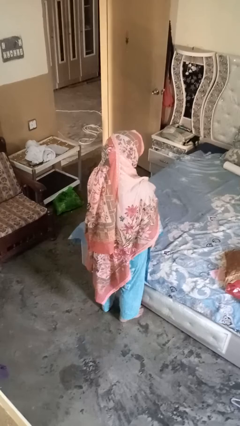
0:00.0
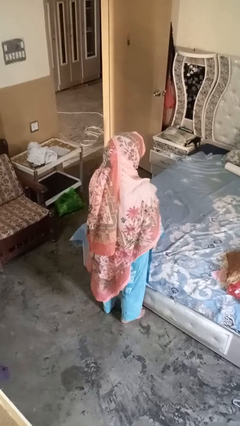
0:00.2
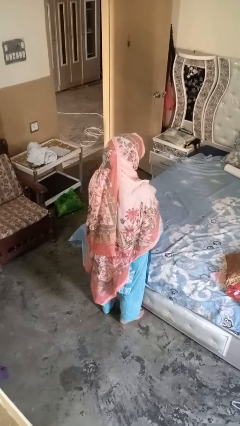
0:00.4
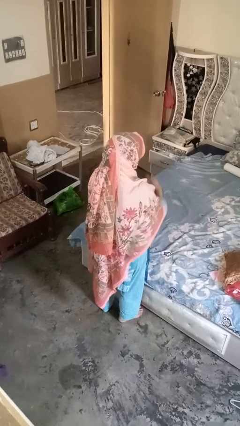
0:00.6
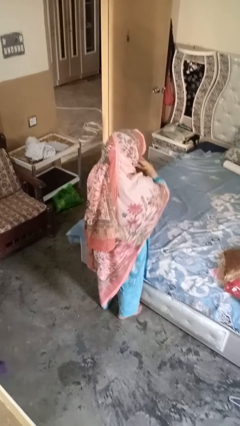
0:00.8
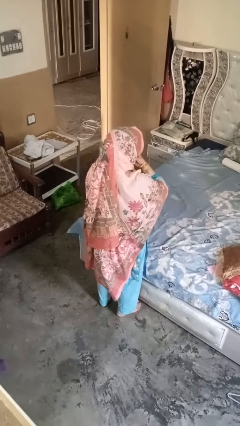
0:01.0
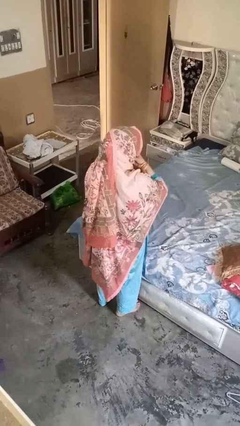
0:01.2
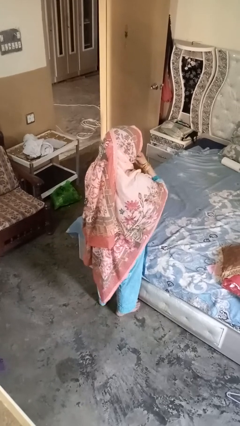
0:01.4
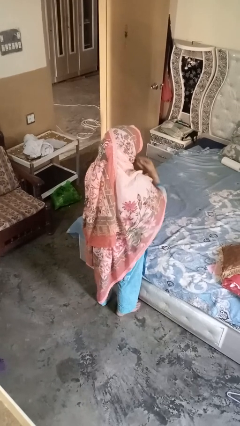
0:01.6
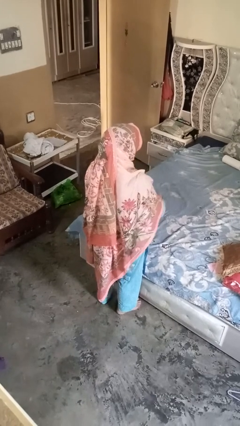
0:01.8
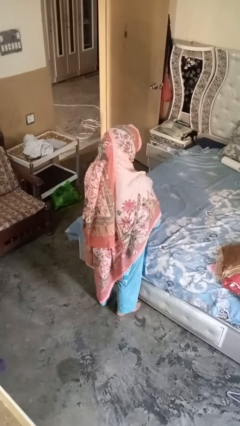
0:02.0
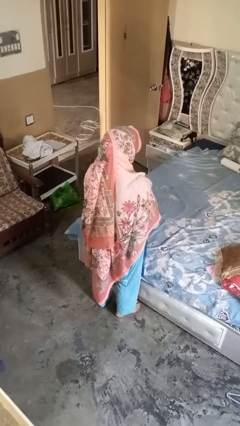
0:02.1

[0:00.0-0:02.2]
person strokes chin

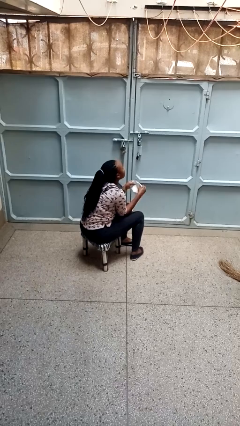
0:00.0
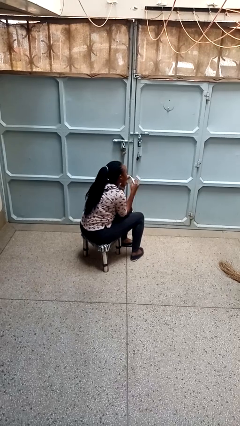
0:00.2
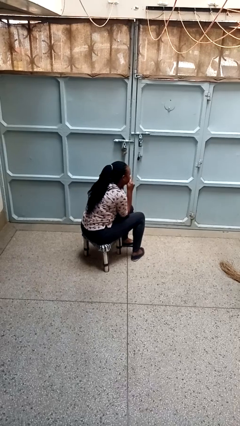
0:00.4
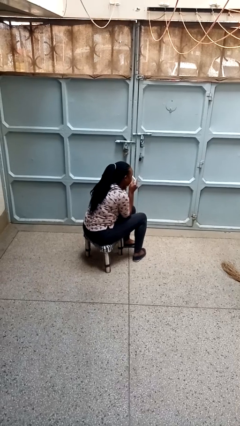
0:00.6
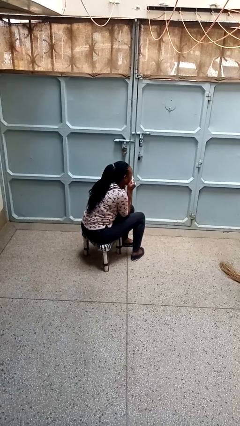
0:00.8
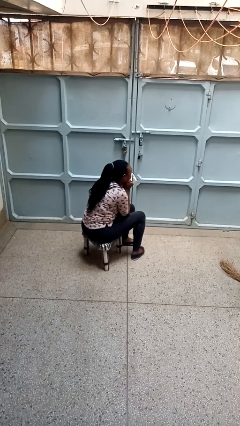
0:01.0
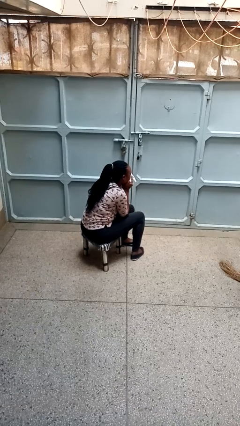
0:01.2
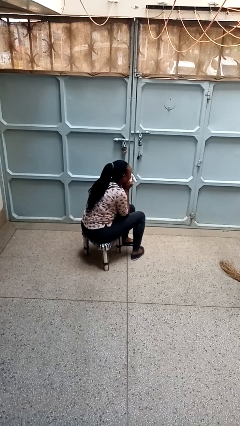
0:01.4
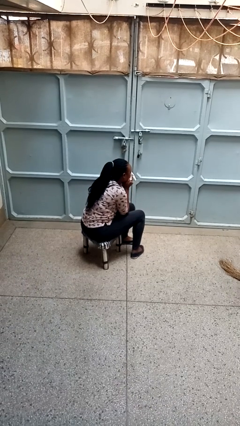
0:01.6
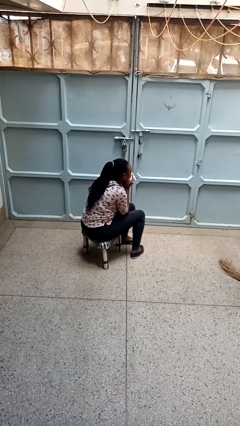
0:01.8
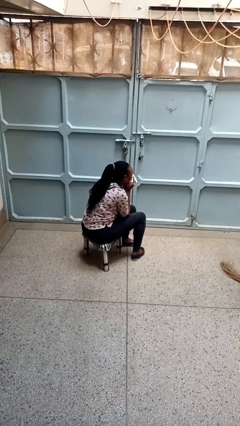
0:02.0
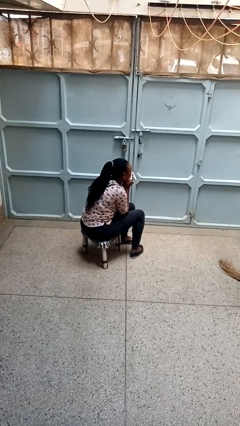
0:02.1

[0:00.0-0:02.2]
person blows nose

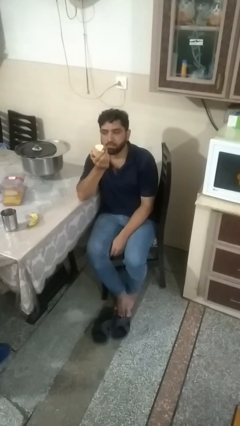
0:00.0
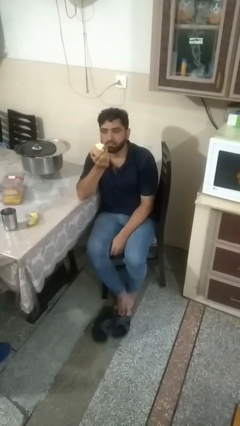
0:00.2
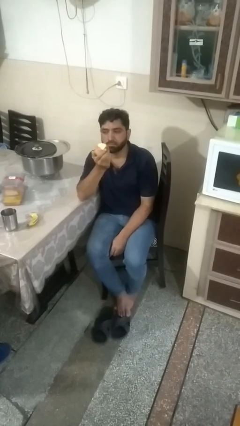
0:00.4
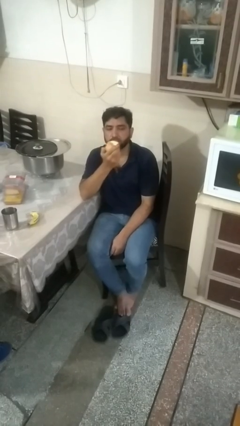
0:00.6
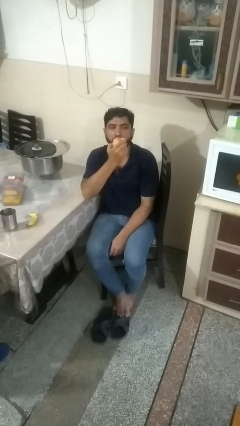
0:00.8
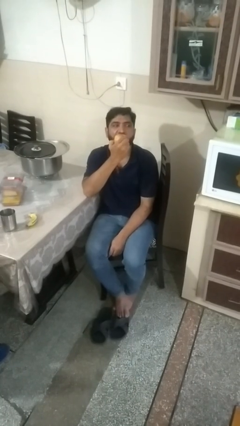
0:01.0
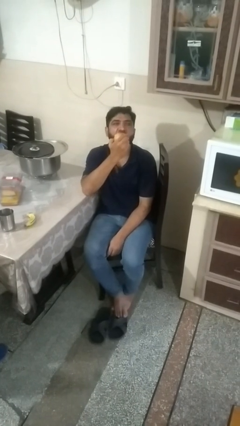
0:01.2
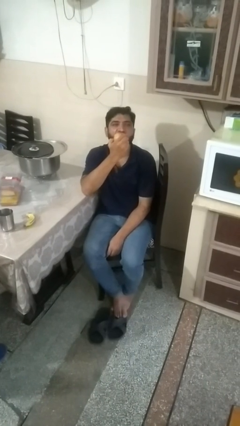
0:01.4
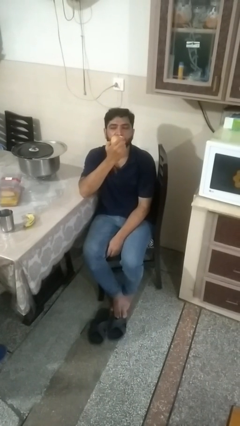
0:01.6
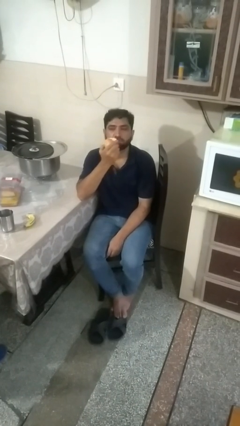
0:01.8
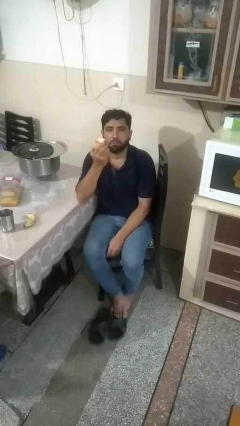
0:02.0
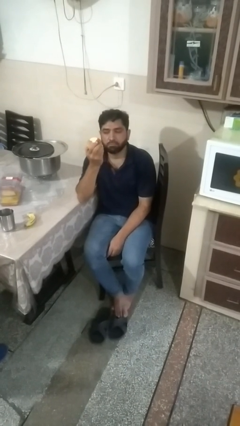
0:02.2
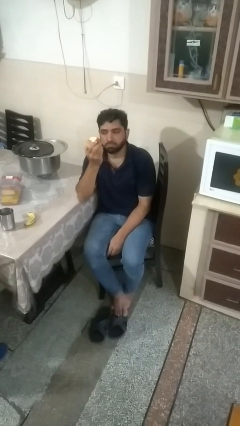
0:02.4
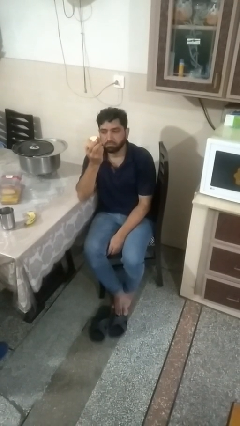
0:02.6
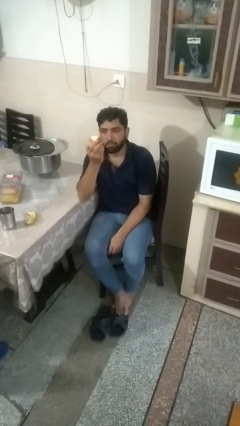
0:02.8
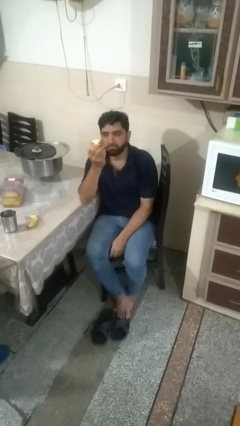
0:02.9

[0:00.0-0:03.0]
person eats apple

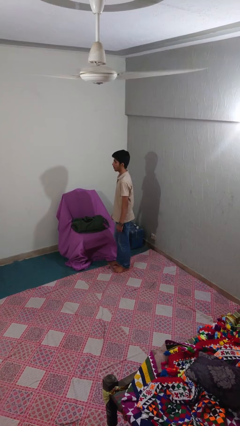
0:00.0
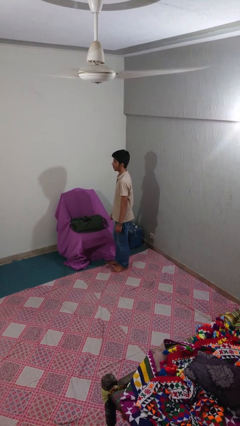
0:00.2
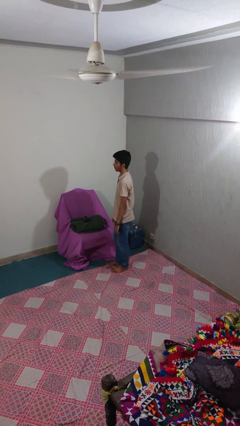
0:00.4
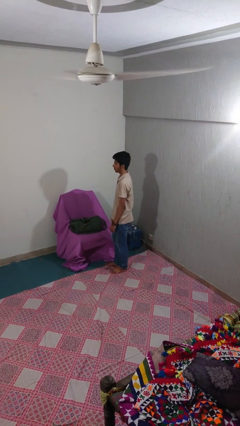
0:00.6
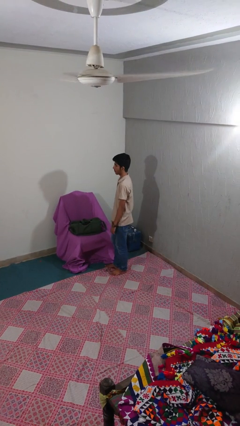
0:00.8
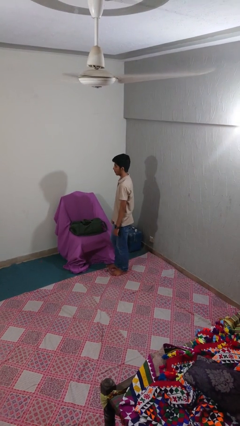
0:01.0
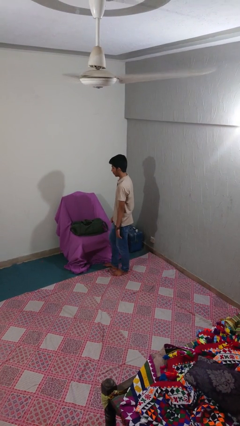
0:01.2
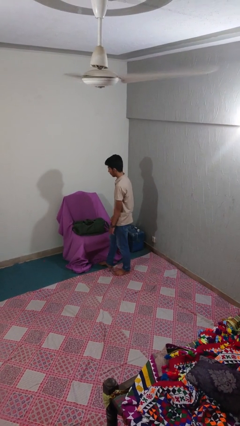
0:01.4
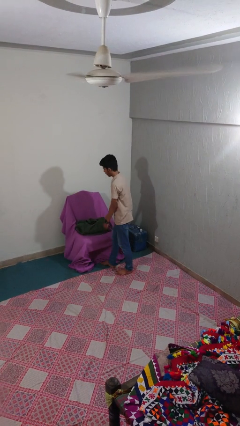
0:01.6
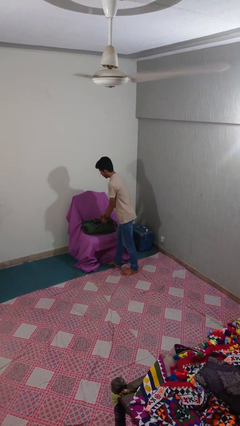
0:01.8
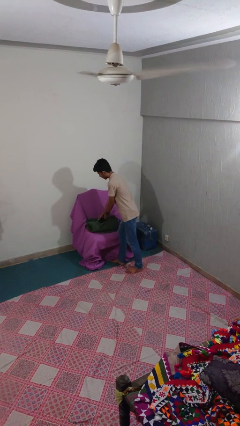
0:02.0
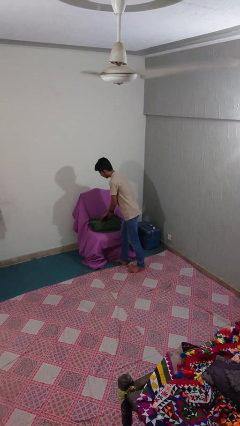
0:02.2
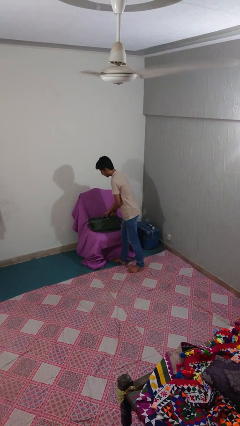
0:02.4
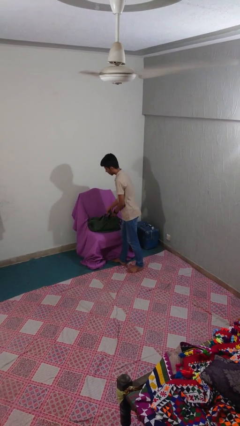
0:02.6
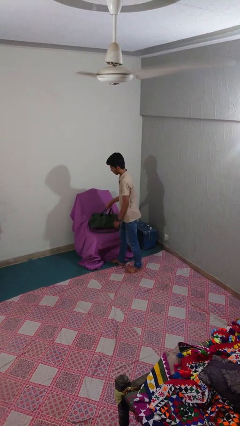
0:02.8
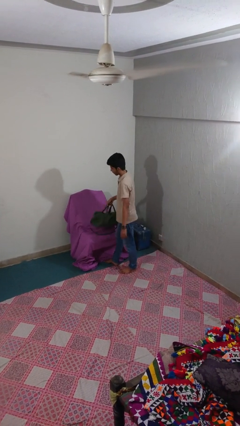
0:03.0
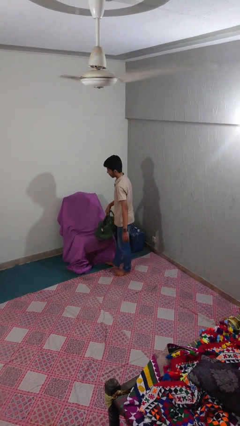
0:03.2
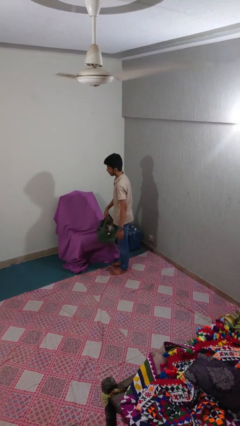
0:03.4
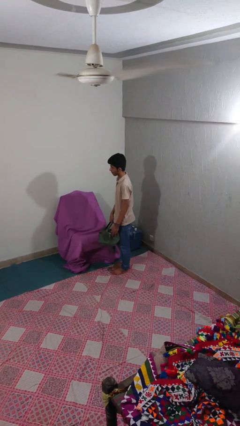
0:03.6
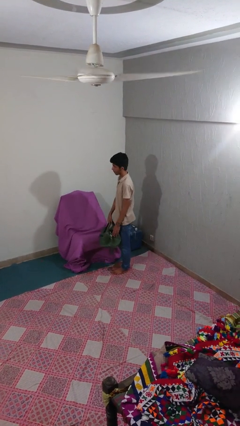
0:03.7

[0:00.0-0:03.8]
person picks up object from couch

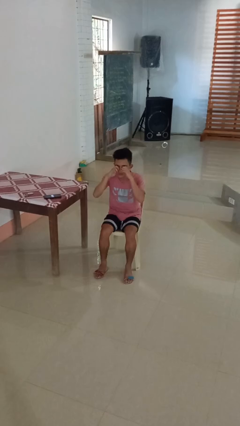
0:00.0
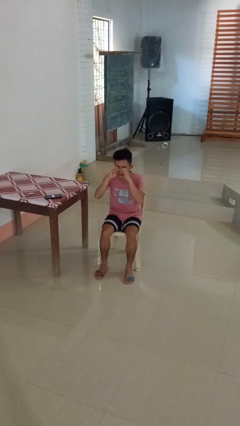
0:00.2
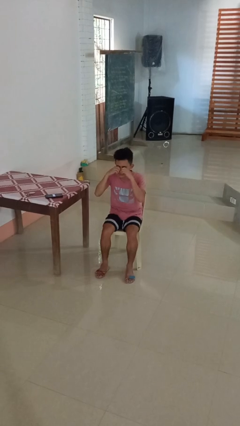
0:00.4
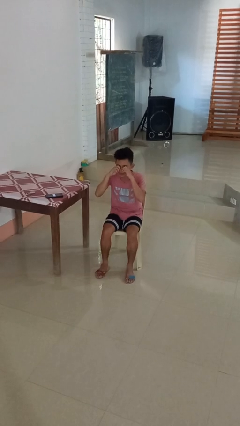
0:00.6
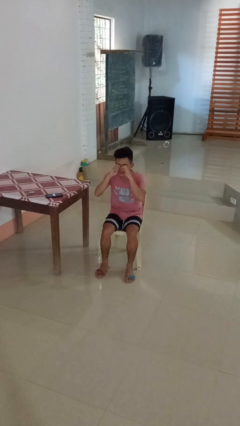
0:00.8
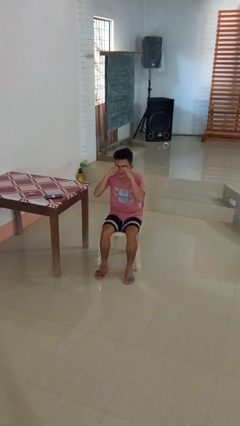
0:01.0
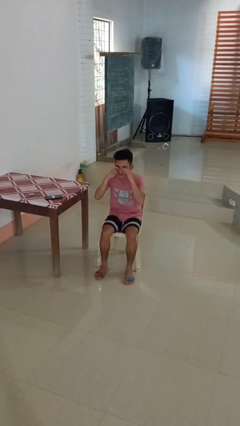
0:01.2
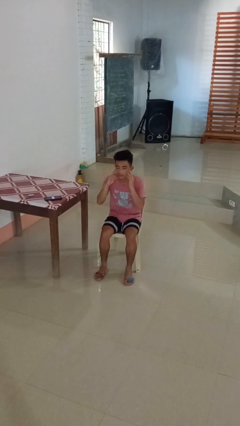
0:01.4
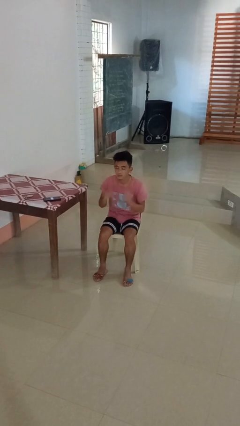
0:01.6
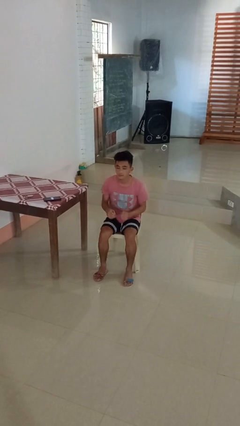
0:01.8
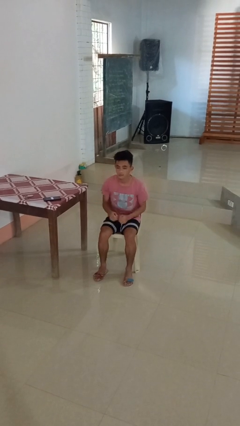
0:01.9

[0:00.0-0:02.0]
person rubs eyes

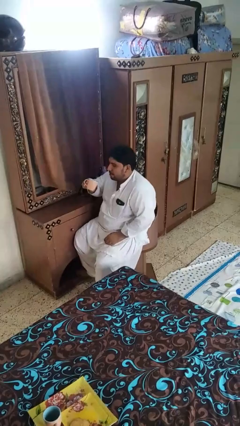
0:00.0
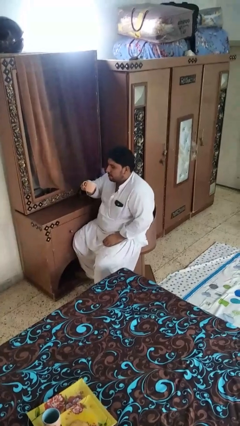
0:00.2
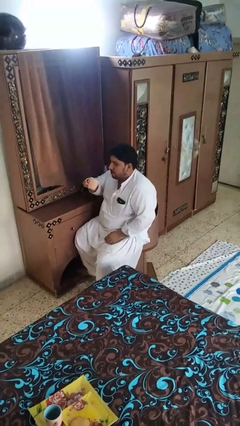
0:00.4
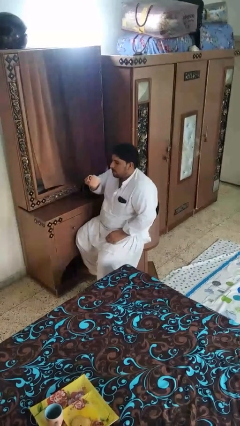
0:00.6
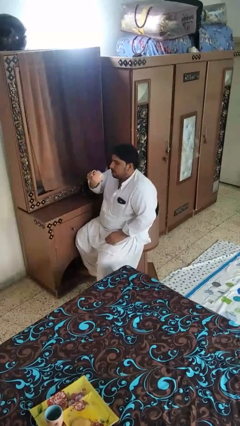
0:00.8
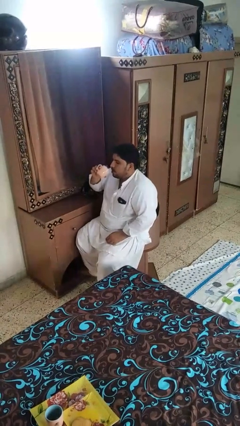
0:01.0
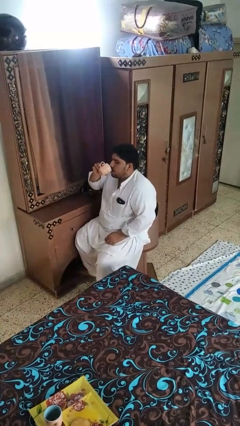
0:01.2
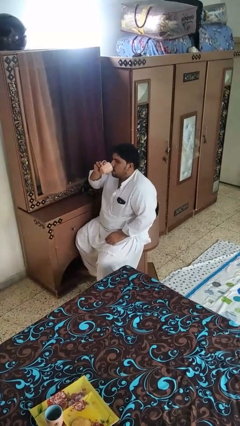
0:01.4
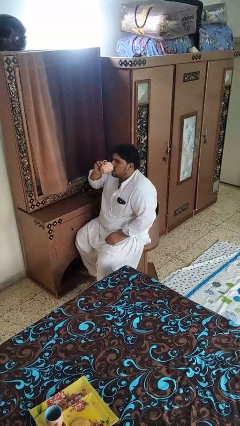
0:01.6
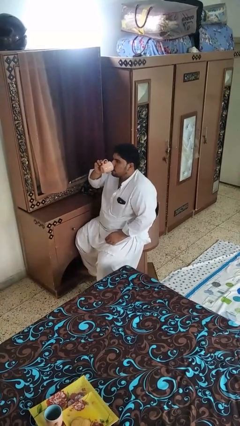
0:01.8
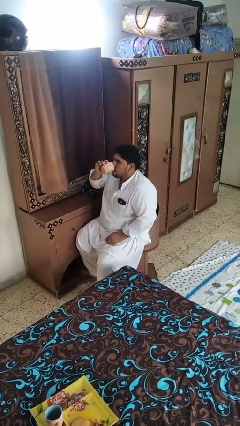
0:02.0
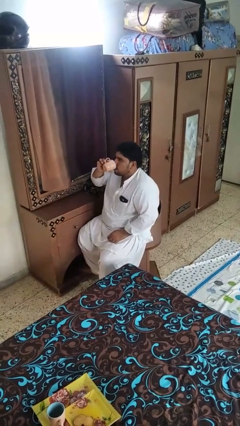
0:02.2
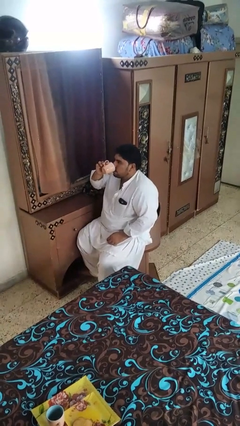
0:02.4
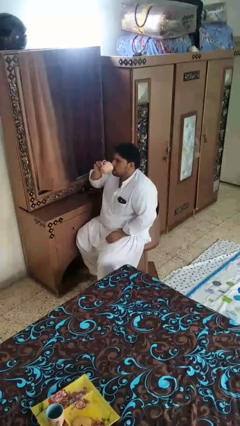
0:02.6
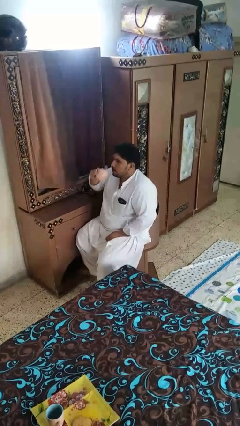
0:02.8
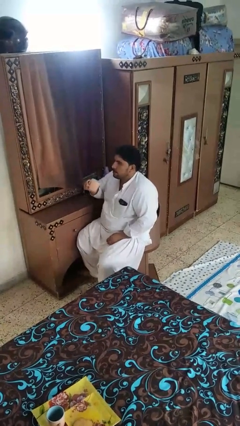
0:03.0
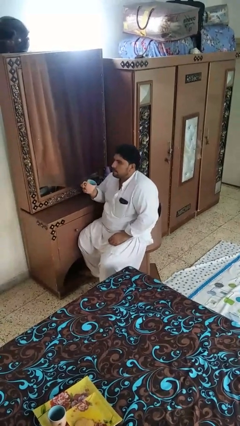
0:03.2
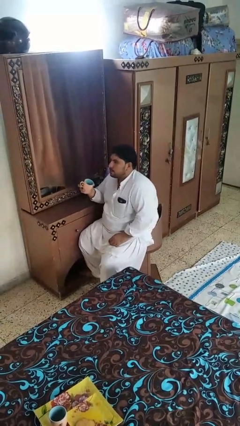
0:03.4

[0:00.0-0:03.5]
person drinks from mug

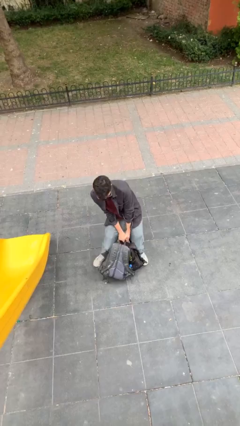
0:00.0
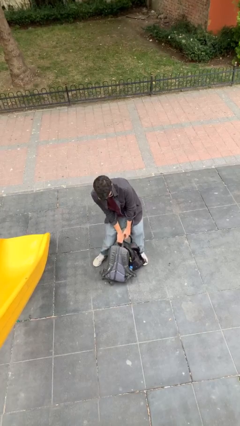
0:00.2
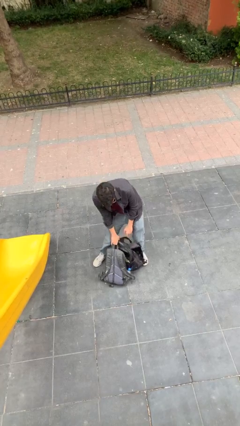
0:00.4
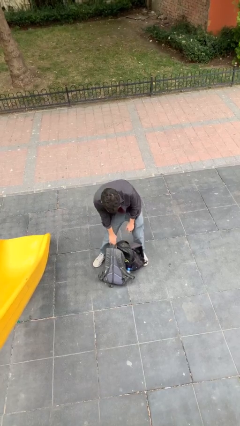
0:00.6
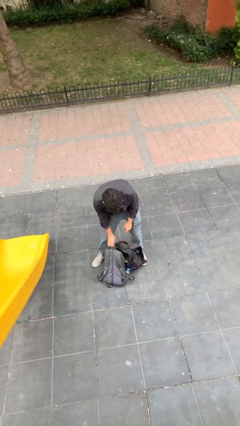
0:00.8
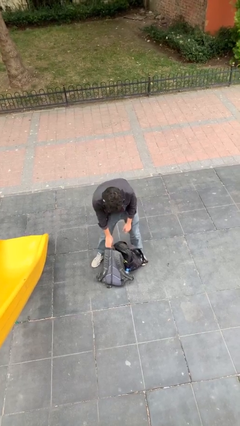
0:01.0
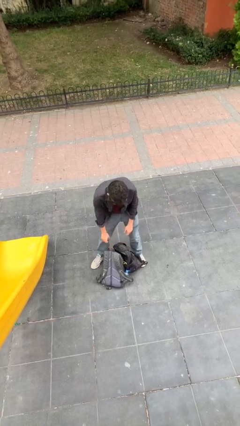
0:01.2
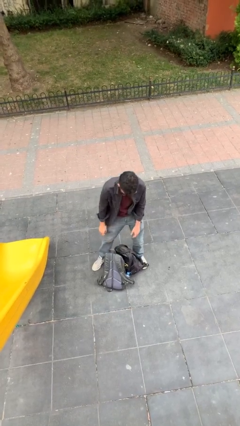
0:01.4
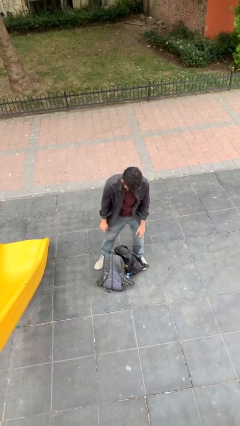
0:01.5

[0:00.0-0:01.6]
person puts down object on floor
